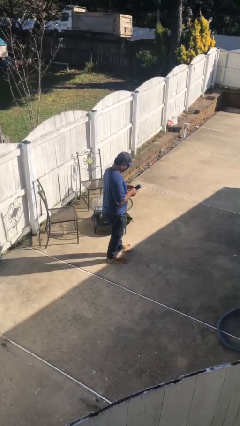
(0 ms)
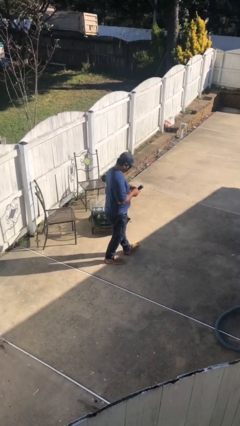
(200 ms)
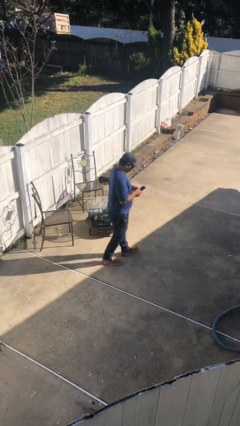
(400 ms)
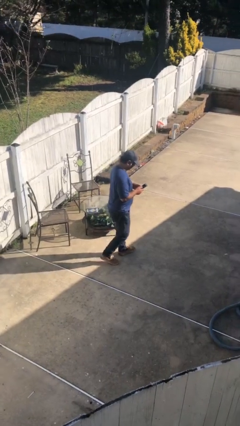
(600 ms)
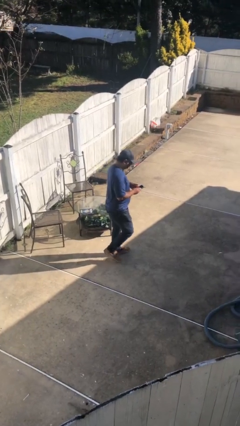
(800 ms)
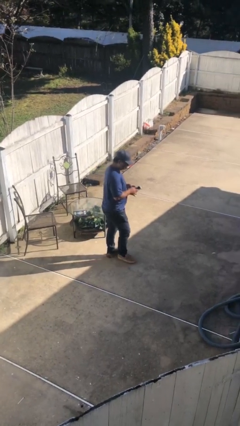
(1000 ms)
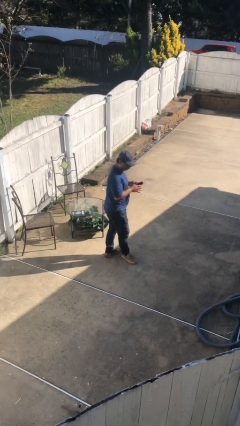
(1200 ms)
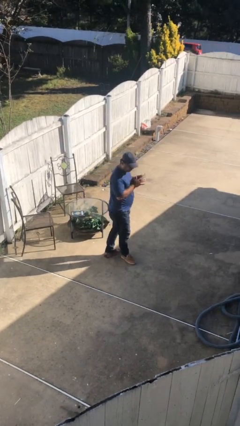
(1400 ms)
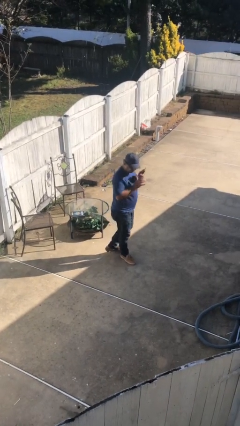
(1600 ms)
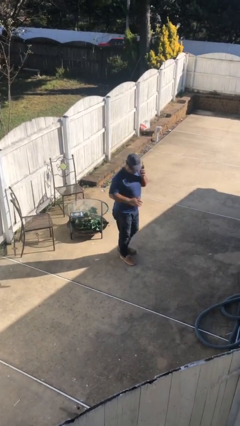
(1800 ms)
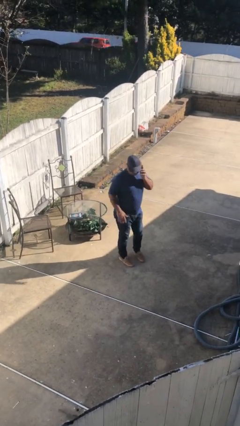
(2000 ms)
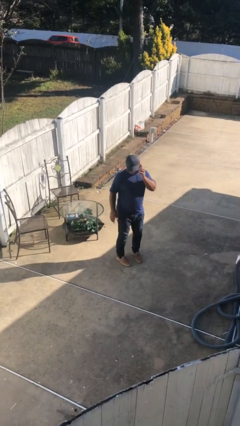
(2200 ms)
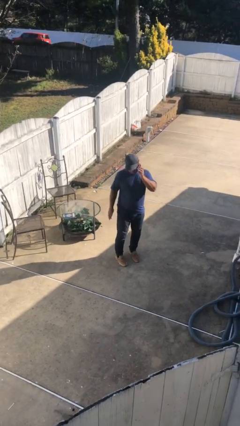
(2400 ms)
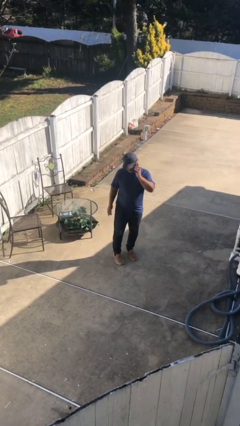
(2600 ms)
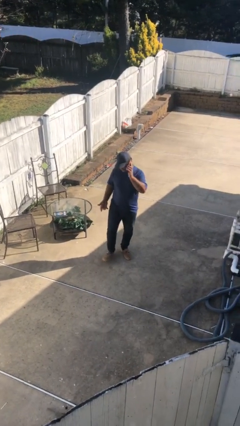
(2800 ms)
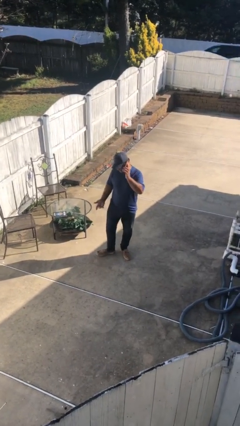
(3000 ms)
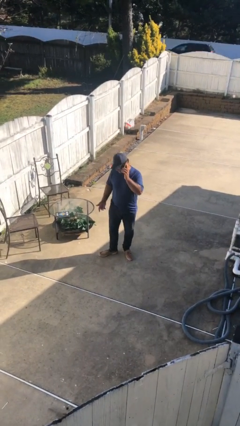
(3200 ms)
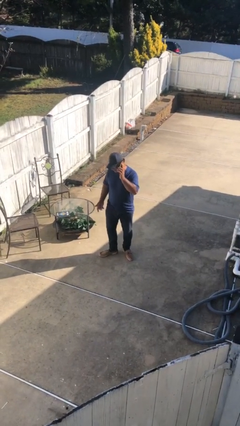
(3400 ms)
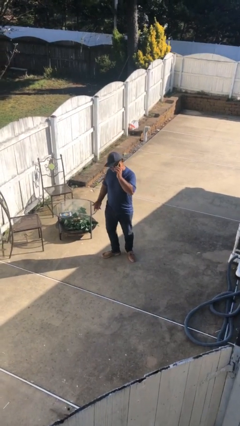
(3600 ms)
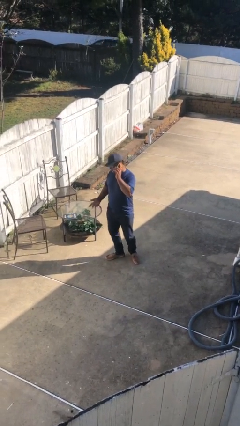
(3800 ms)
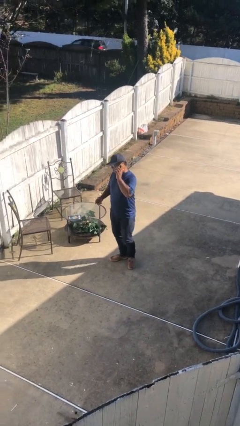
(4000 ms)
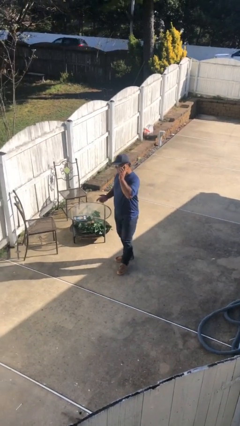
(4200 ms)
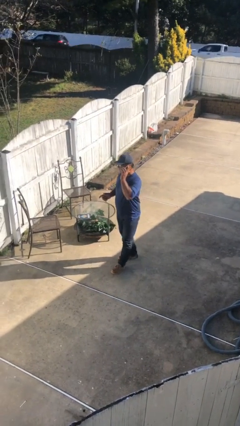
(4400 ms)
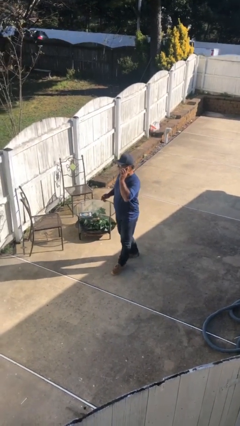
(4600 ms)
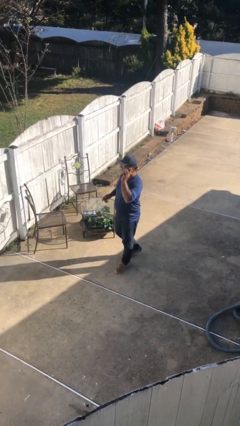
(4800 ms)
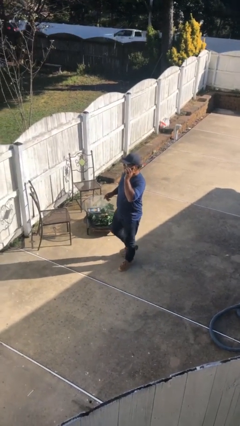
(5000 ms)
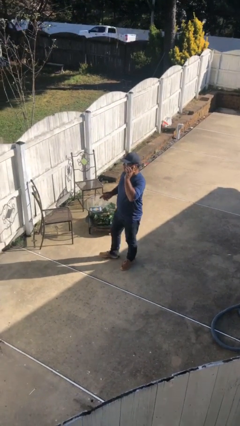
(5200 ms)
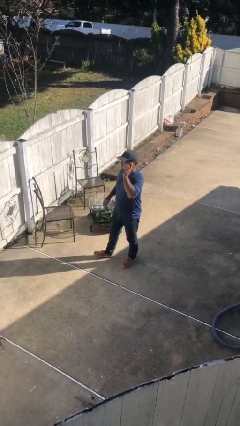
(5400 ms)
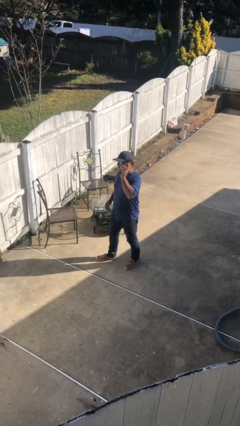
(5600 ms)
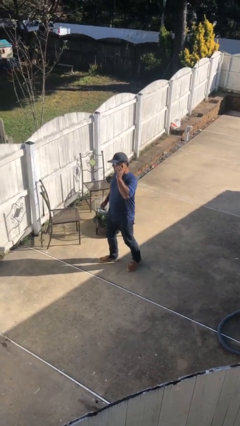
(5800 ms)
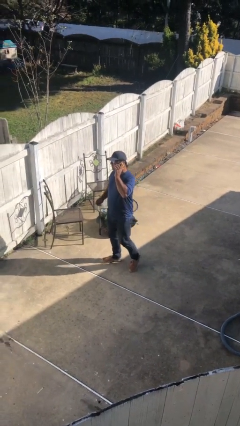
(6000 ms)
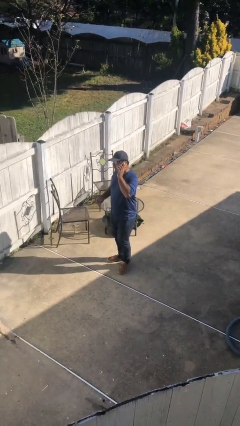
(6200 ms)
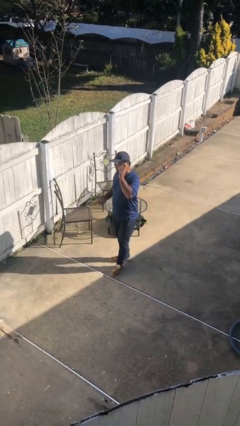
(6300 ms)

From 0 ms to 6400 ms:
person talks on phone

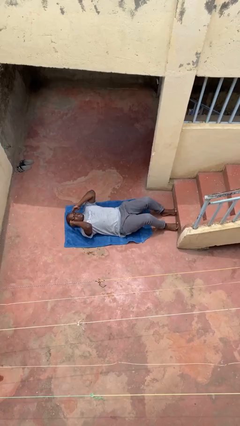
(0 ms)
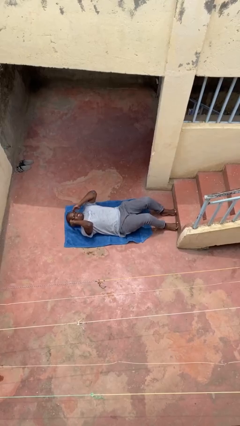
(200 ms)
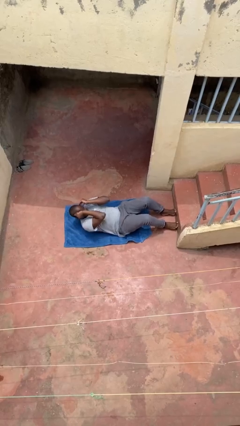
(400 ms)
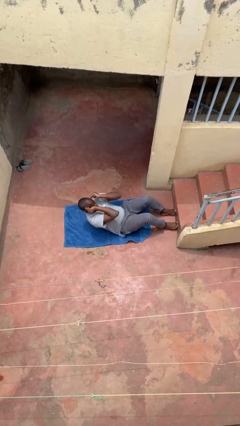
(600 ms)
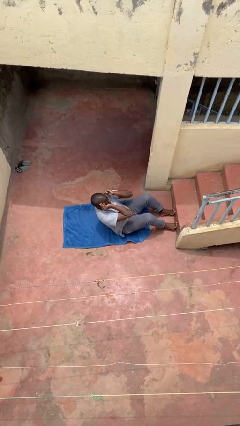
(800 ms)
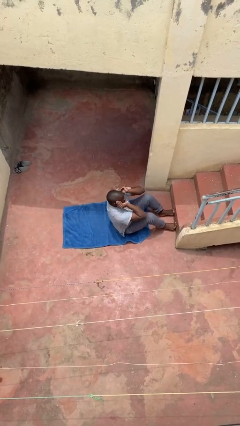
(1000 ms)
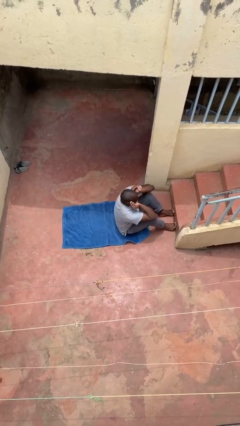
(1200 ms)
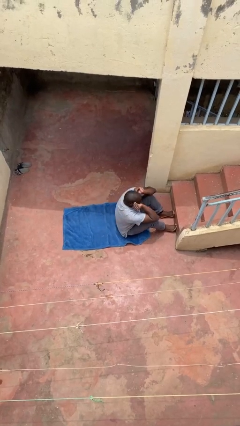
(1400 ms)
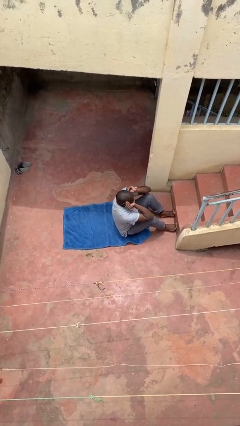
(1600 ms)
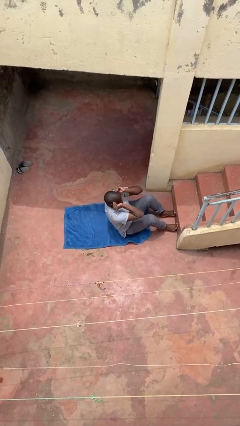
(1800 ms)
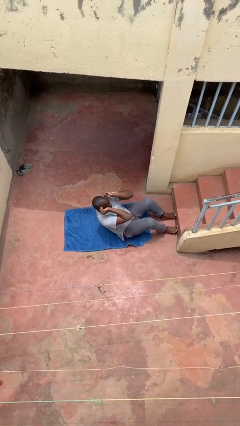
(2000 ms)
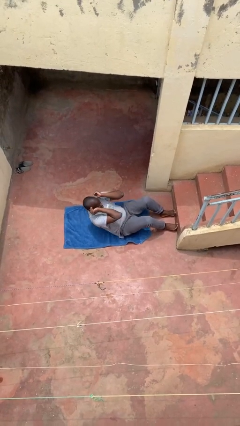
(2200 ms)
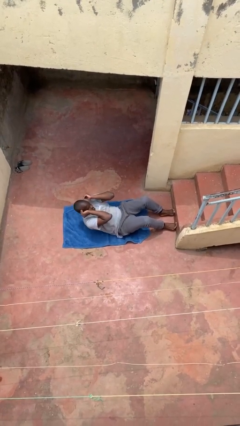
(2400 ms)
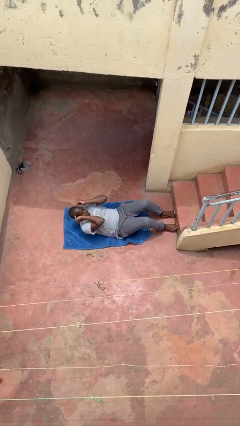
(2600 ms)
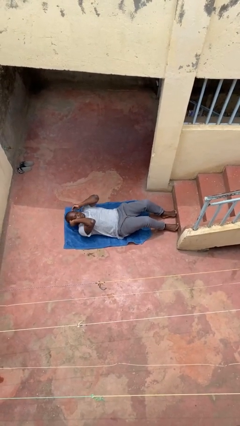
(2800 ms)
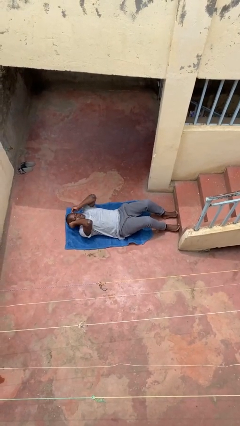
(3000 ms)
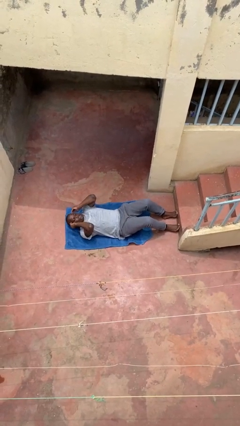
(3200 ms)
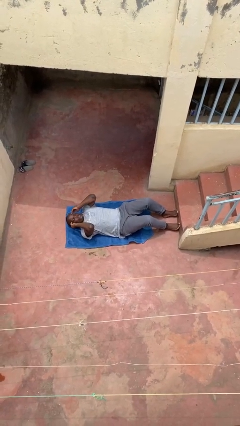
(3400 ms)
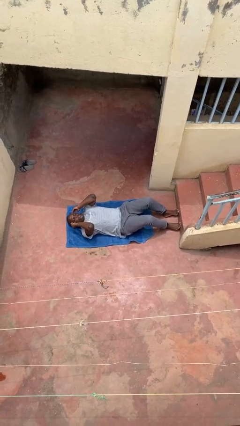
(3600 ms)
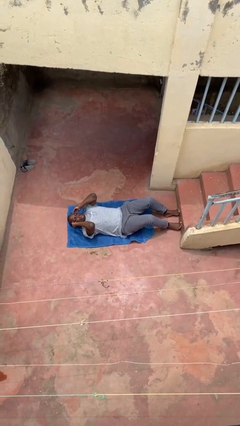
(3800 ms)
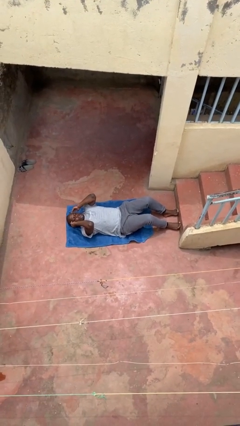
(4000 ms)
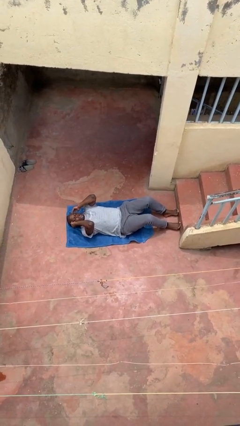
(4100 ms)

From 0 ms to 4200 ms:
person exercises with situp

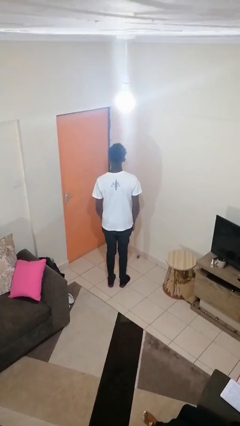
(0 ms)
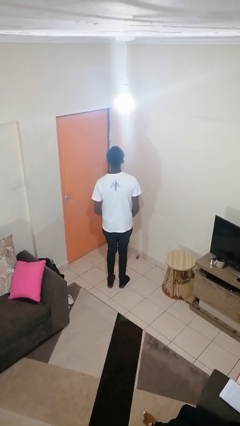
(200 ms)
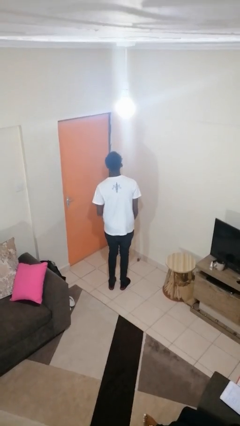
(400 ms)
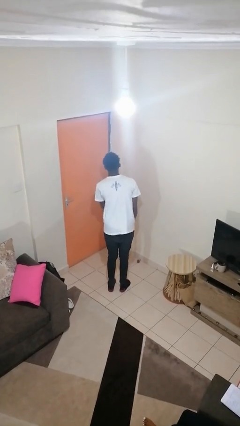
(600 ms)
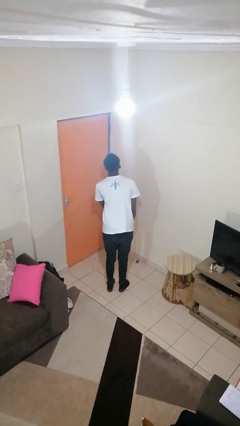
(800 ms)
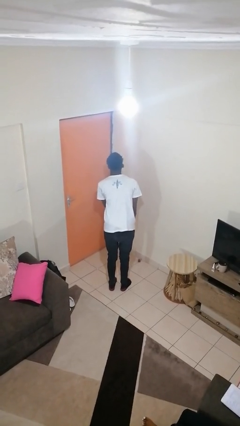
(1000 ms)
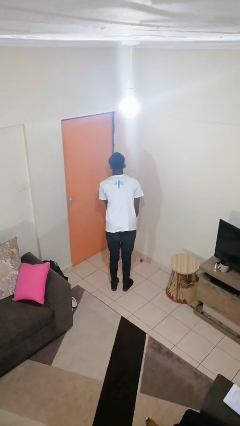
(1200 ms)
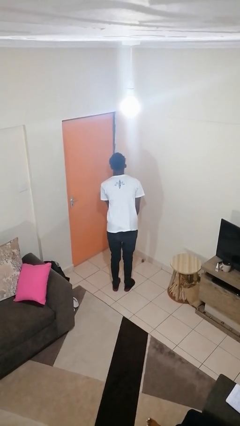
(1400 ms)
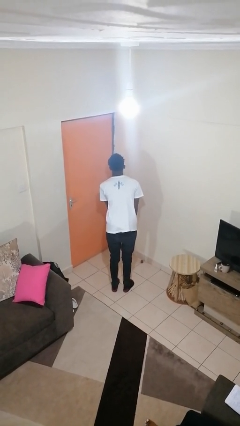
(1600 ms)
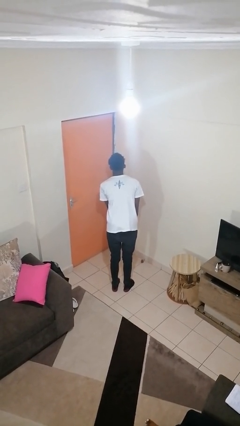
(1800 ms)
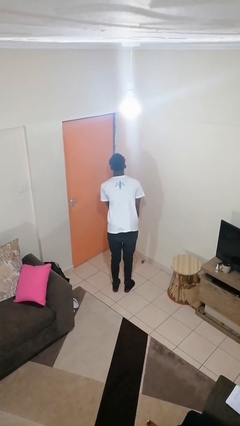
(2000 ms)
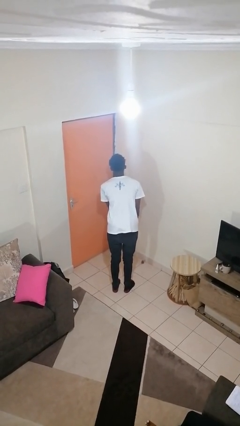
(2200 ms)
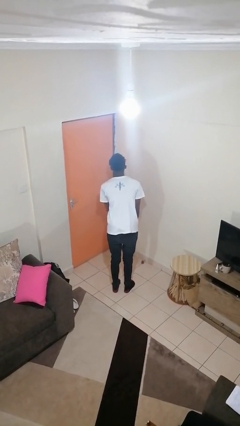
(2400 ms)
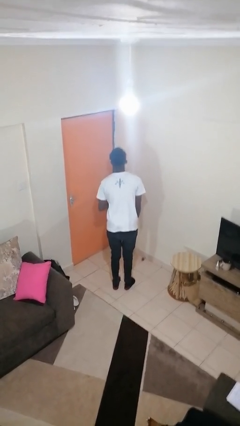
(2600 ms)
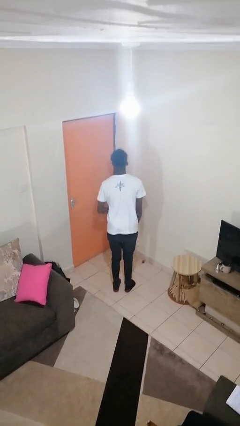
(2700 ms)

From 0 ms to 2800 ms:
person sticks out tongue

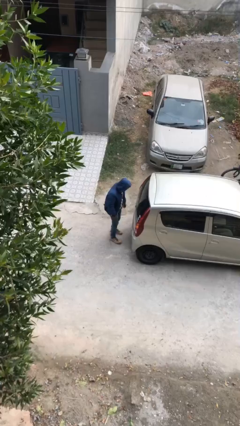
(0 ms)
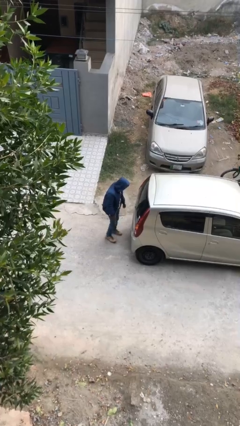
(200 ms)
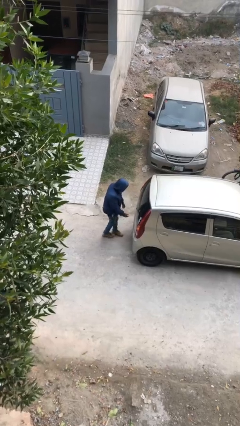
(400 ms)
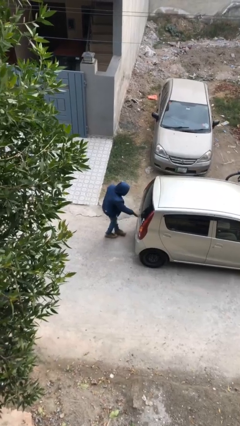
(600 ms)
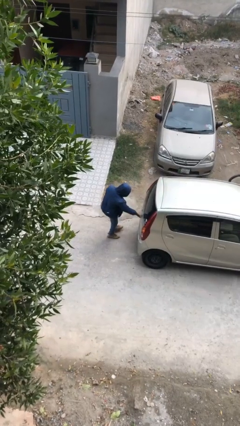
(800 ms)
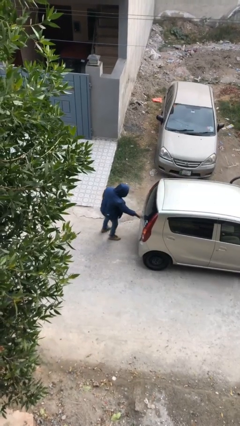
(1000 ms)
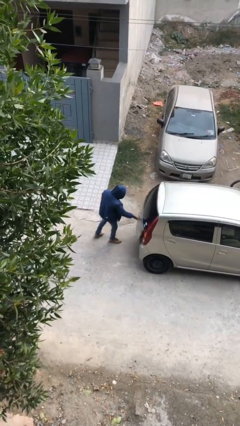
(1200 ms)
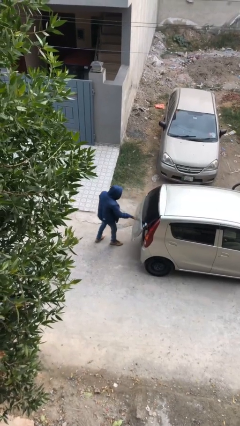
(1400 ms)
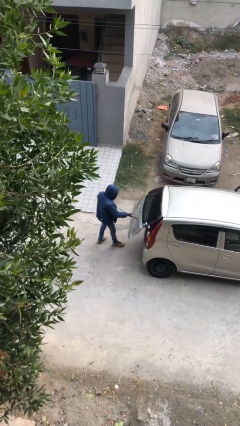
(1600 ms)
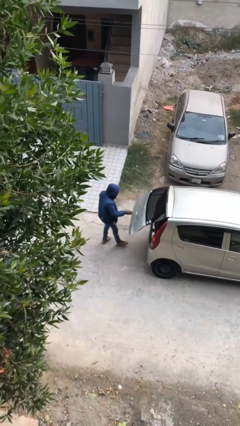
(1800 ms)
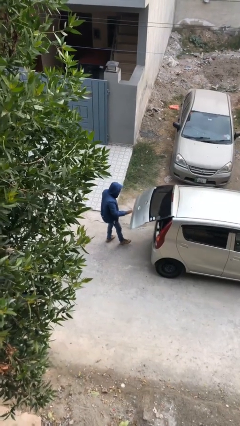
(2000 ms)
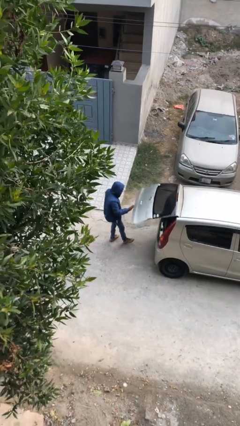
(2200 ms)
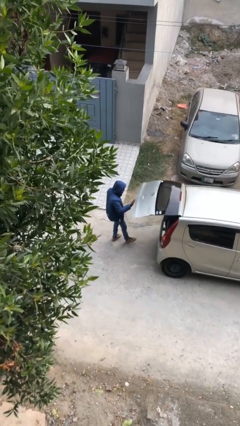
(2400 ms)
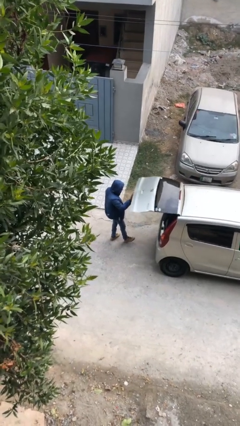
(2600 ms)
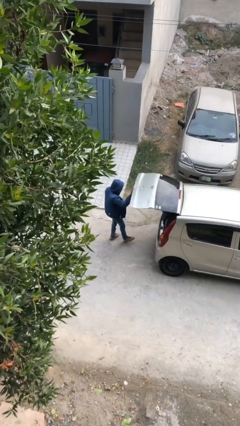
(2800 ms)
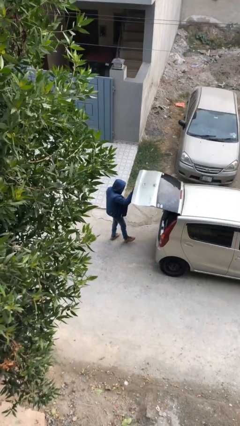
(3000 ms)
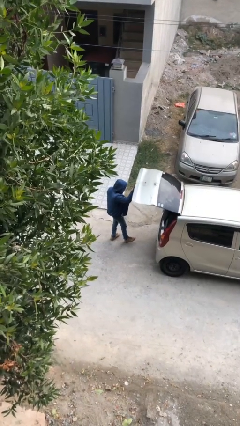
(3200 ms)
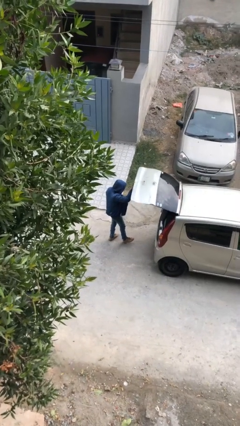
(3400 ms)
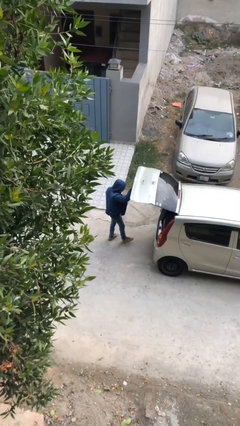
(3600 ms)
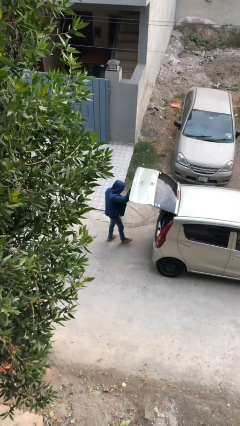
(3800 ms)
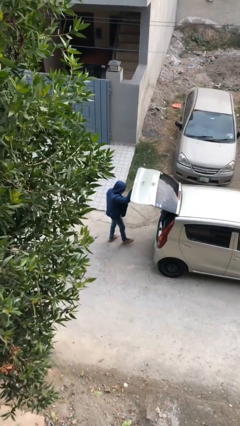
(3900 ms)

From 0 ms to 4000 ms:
person opens car trunk
